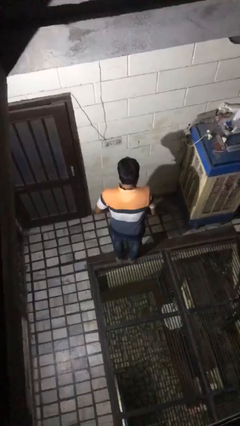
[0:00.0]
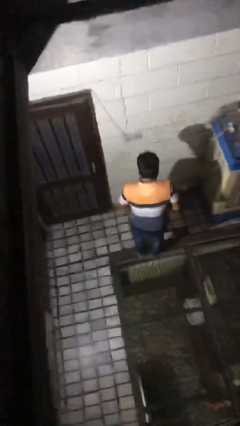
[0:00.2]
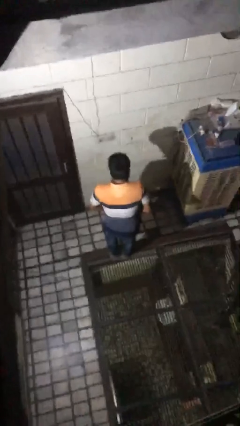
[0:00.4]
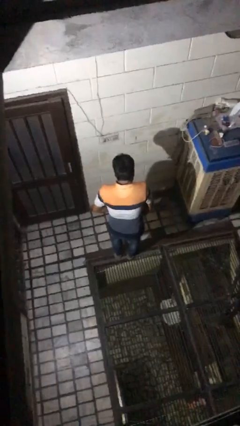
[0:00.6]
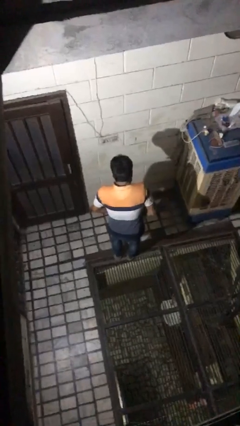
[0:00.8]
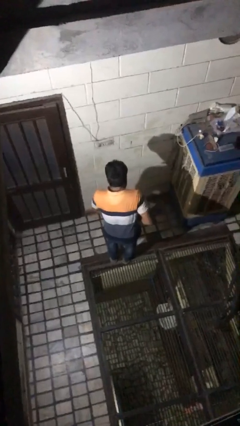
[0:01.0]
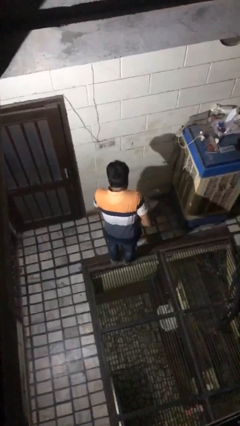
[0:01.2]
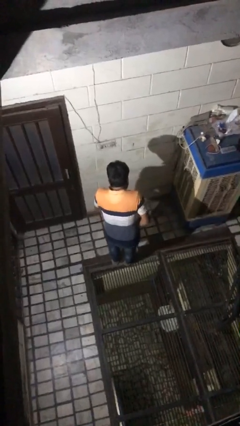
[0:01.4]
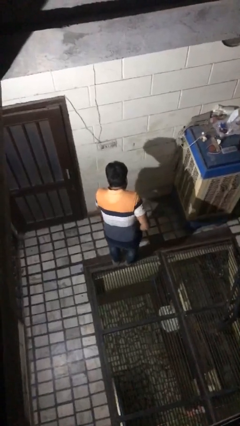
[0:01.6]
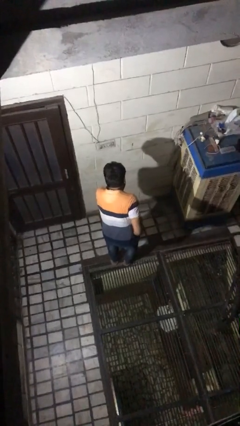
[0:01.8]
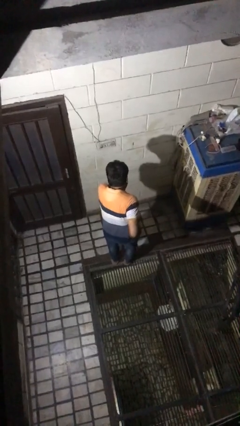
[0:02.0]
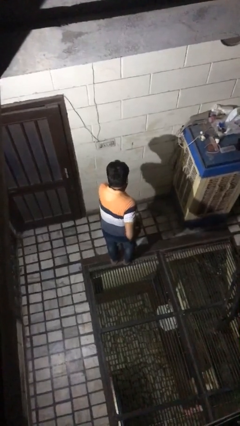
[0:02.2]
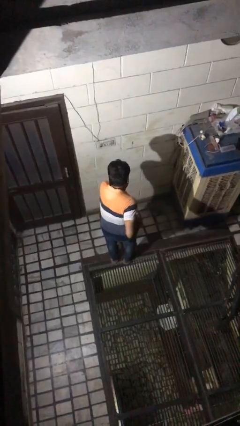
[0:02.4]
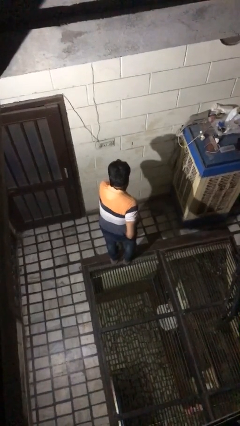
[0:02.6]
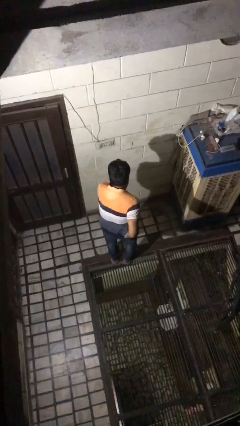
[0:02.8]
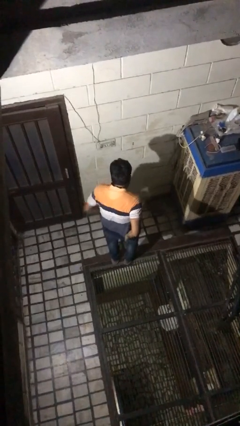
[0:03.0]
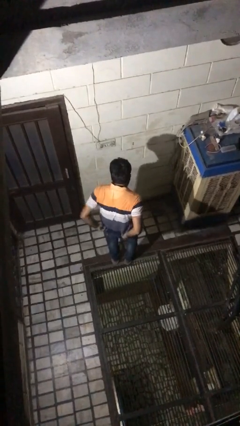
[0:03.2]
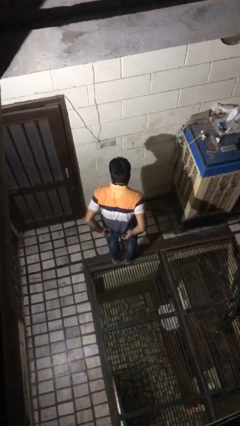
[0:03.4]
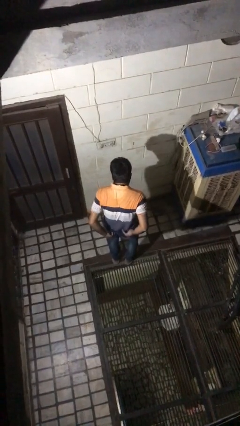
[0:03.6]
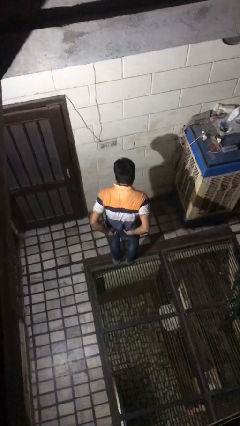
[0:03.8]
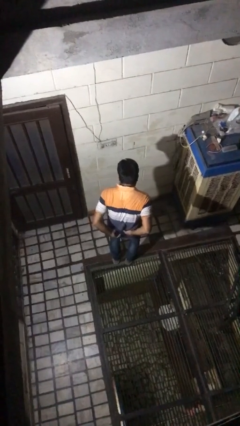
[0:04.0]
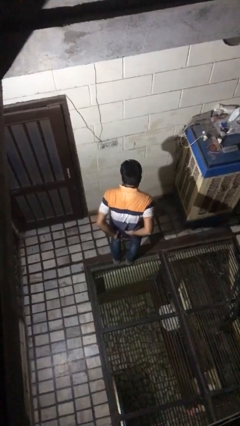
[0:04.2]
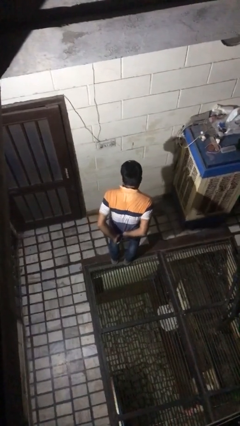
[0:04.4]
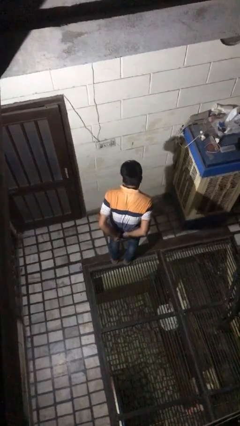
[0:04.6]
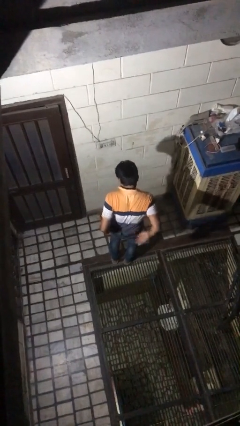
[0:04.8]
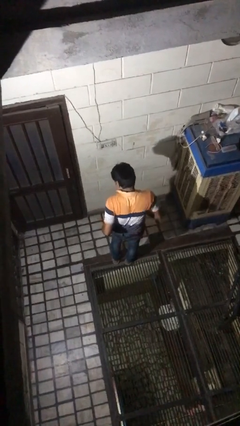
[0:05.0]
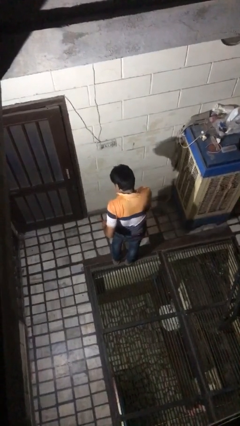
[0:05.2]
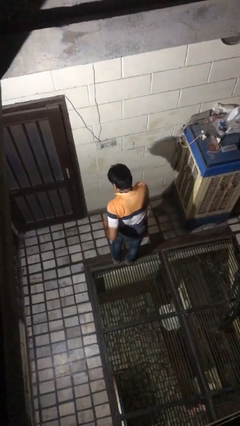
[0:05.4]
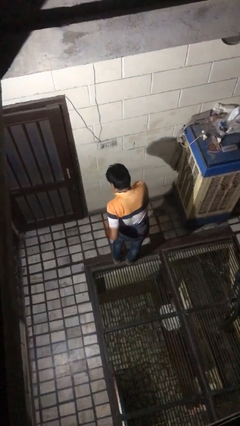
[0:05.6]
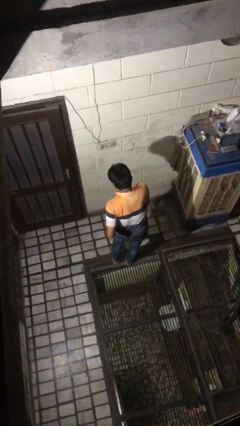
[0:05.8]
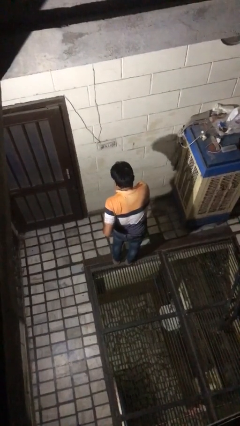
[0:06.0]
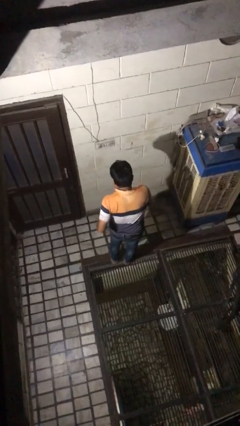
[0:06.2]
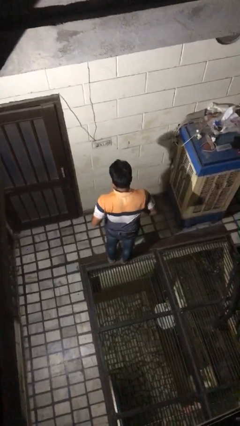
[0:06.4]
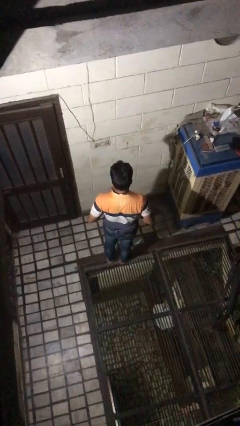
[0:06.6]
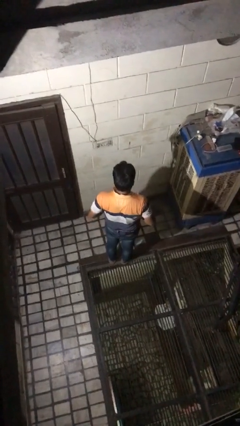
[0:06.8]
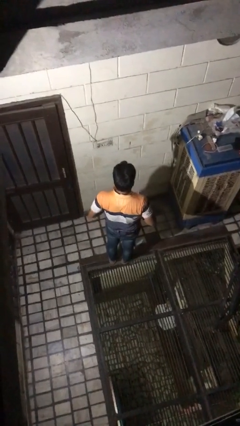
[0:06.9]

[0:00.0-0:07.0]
person tucks in shirt

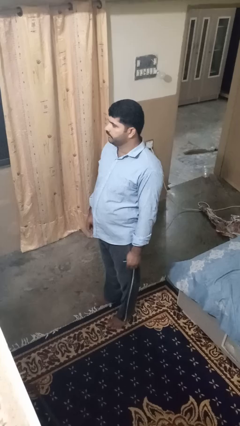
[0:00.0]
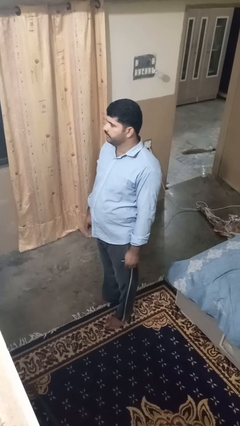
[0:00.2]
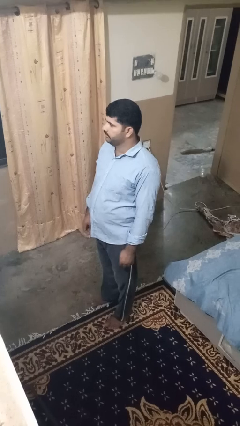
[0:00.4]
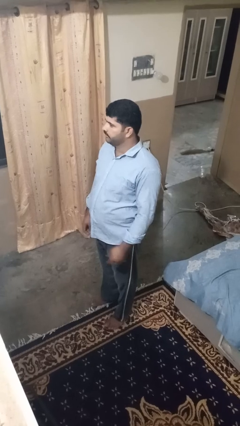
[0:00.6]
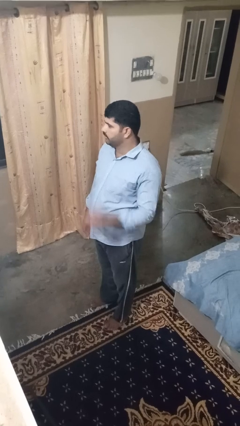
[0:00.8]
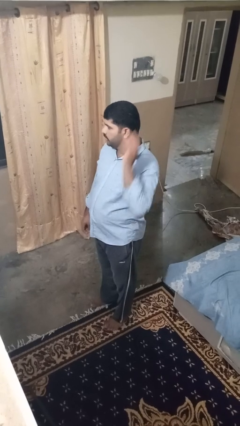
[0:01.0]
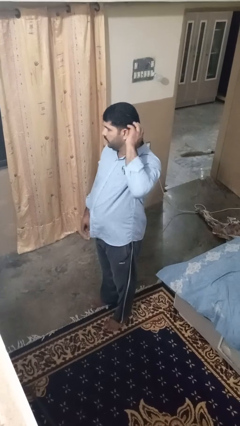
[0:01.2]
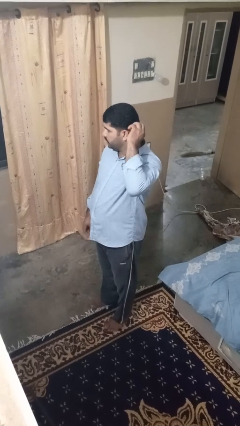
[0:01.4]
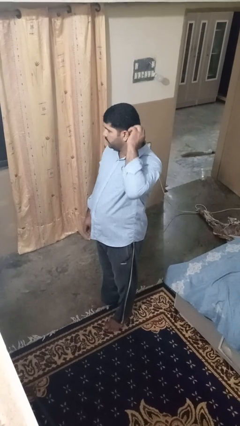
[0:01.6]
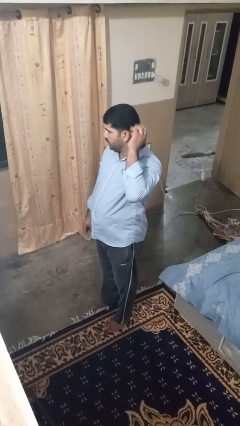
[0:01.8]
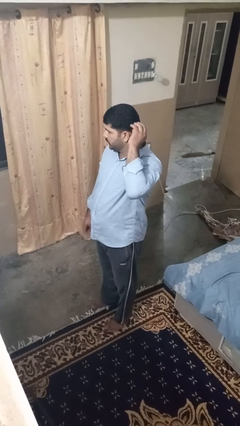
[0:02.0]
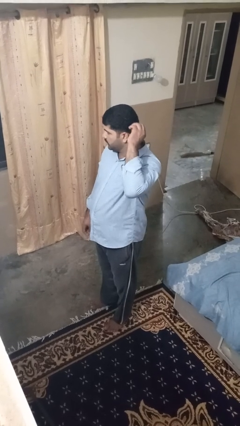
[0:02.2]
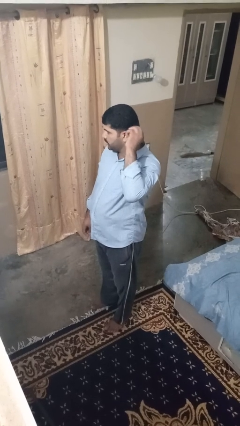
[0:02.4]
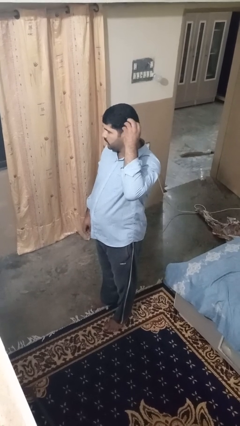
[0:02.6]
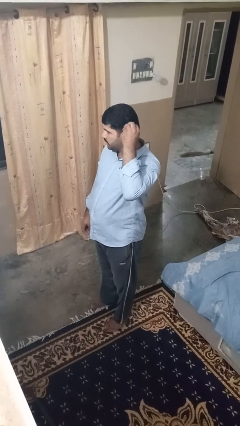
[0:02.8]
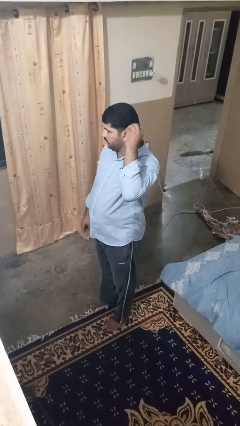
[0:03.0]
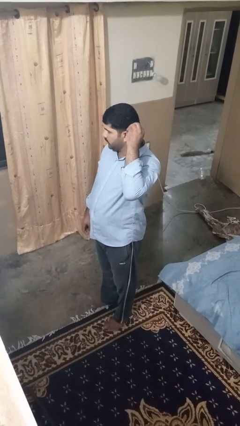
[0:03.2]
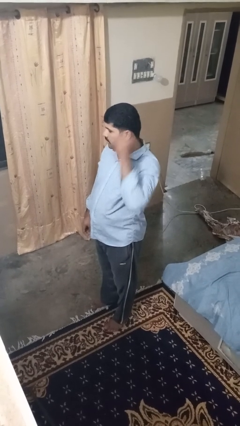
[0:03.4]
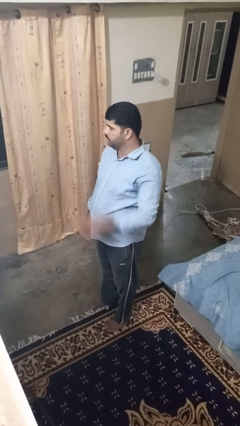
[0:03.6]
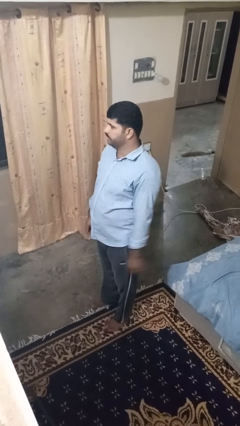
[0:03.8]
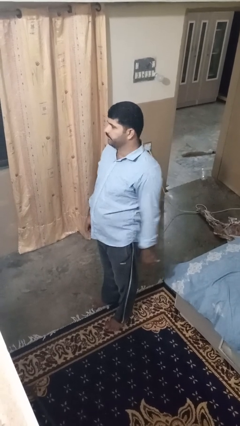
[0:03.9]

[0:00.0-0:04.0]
person strokes hair

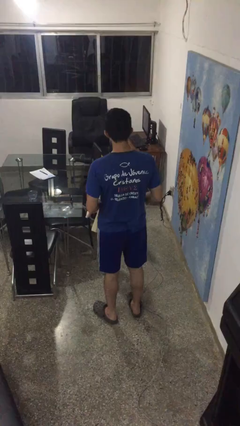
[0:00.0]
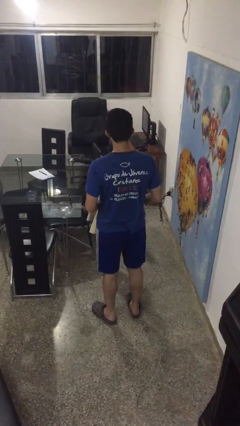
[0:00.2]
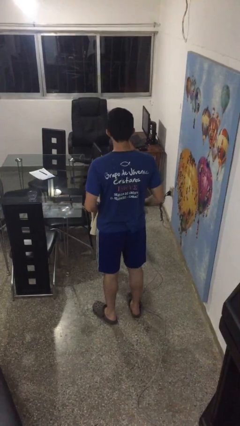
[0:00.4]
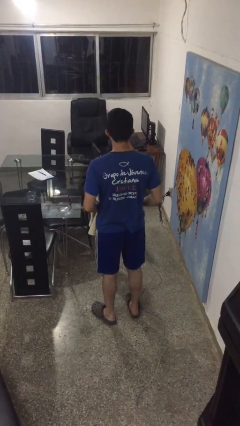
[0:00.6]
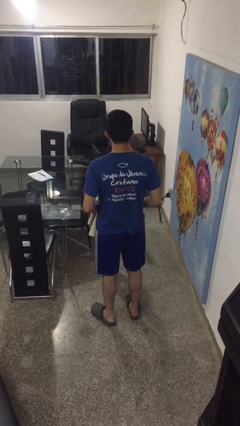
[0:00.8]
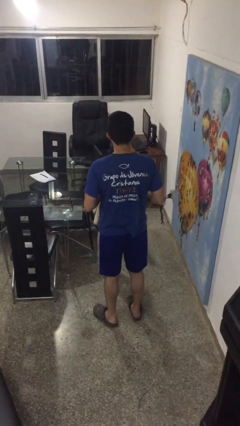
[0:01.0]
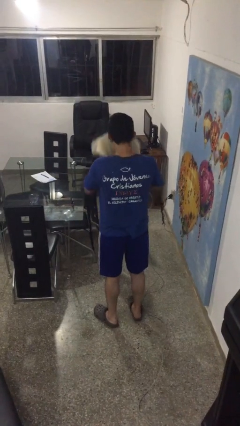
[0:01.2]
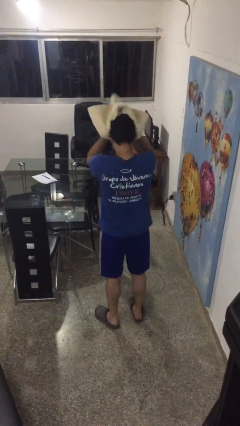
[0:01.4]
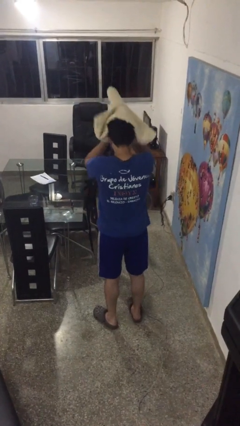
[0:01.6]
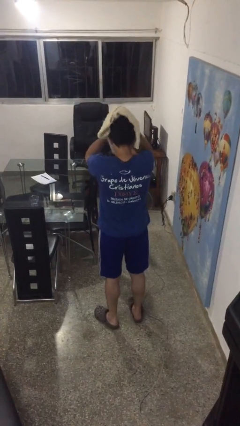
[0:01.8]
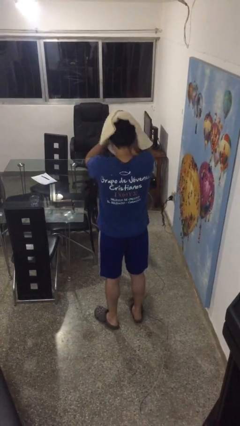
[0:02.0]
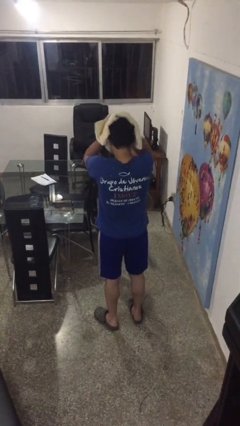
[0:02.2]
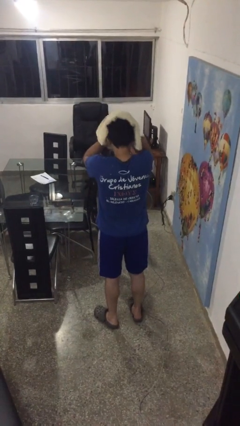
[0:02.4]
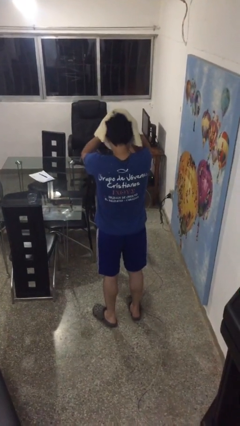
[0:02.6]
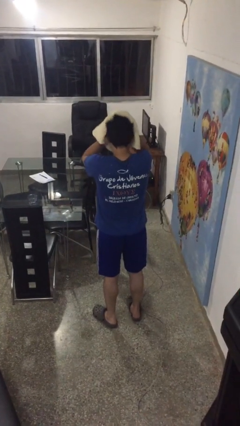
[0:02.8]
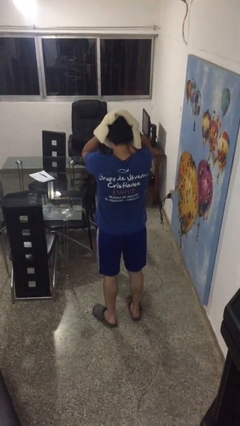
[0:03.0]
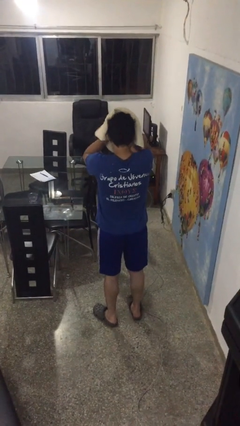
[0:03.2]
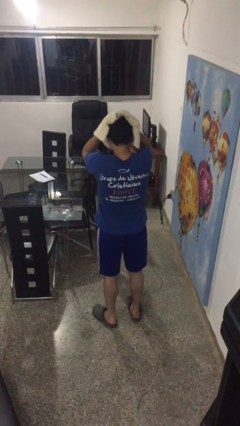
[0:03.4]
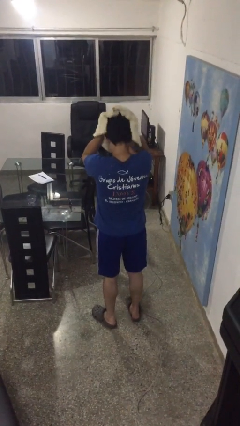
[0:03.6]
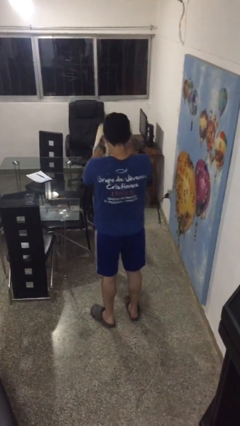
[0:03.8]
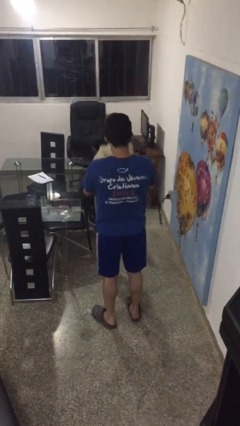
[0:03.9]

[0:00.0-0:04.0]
person dries hair with towel

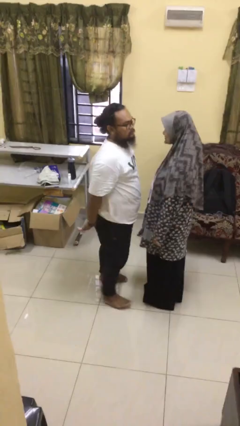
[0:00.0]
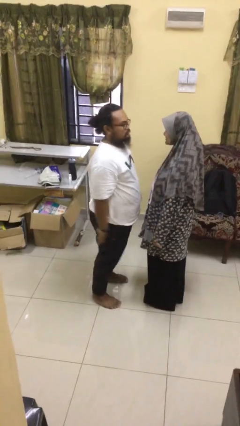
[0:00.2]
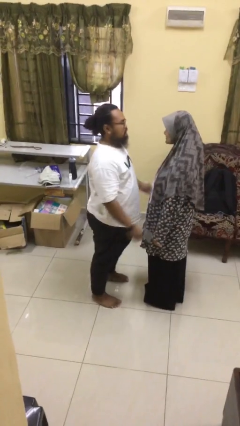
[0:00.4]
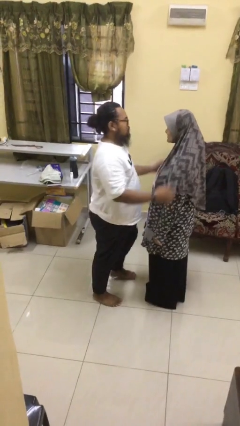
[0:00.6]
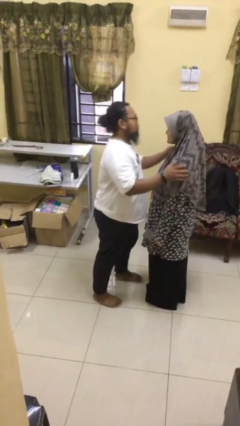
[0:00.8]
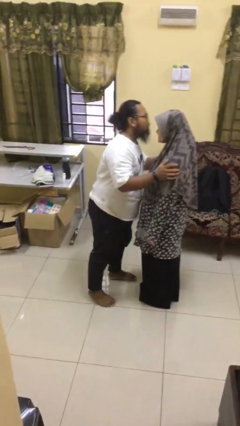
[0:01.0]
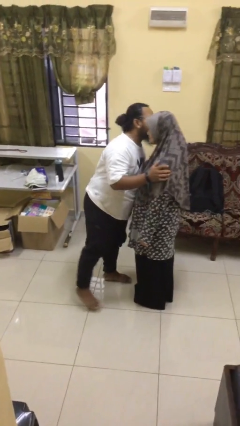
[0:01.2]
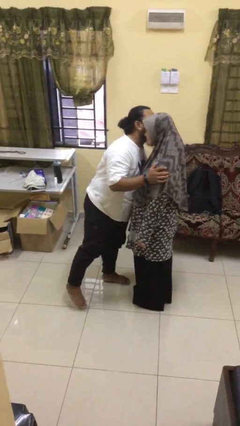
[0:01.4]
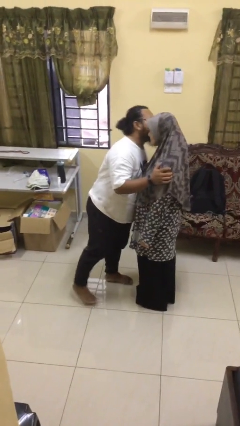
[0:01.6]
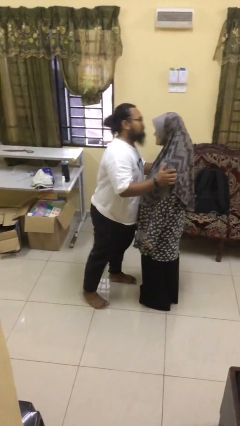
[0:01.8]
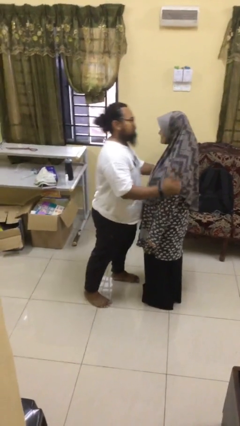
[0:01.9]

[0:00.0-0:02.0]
person kisses cheek of person

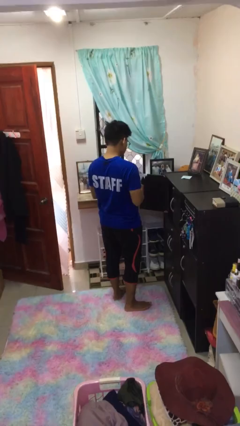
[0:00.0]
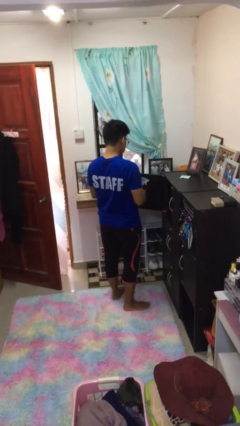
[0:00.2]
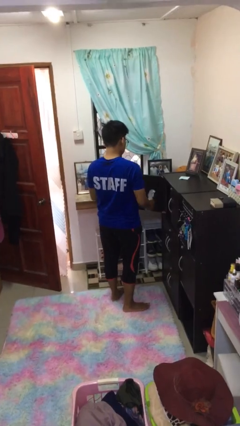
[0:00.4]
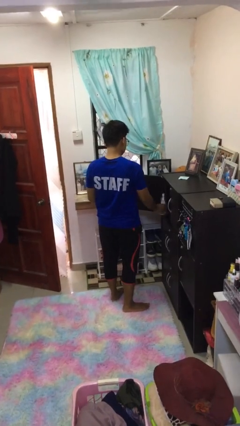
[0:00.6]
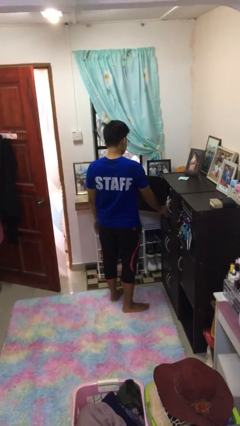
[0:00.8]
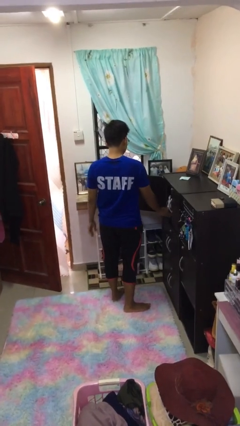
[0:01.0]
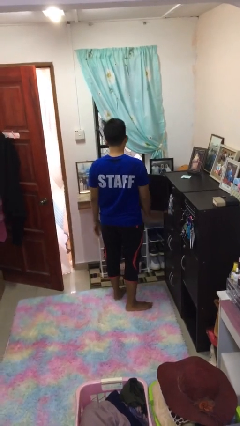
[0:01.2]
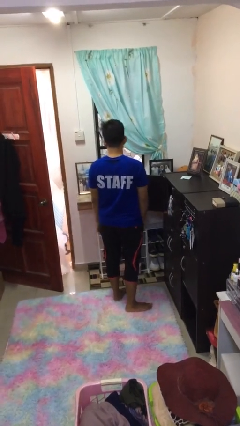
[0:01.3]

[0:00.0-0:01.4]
person puts down object into cabinet
